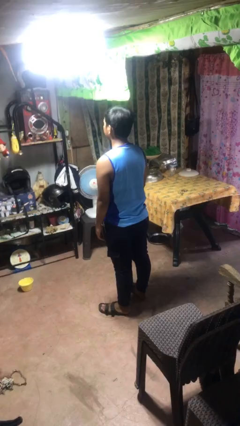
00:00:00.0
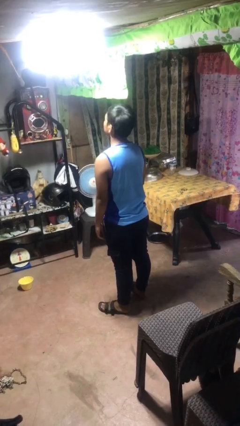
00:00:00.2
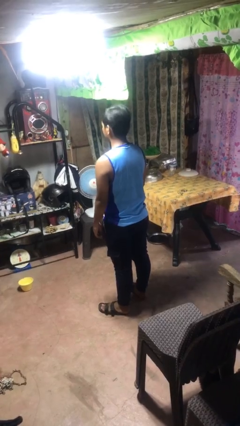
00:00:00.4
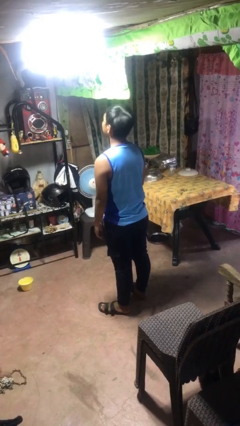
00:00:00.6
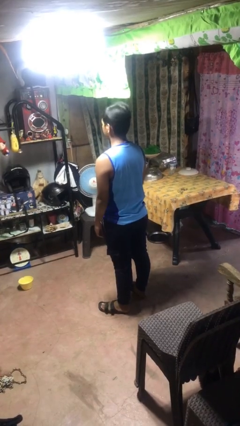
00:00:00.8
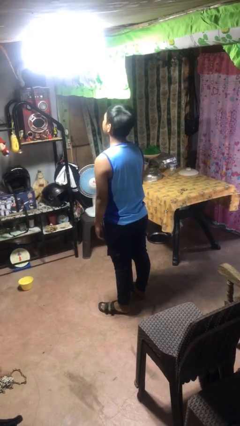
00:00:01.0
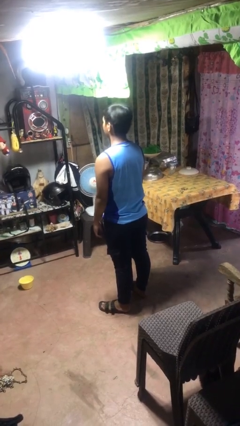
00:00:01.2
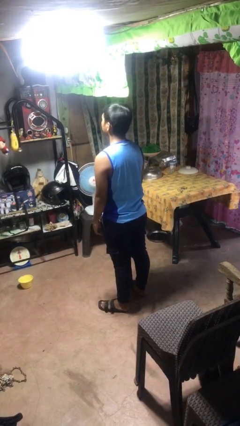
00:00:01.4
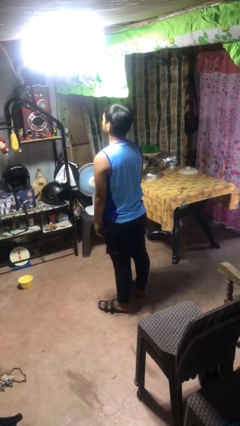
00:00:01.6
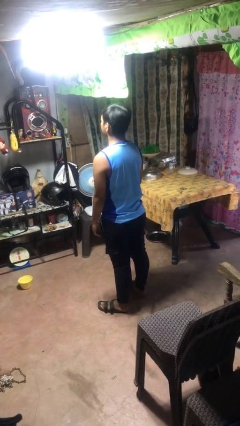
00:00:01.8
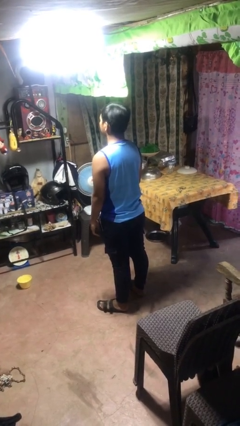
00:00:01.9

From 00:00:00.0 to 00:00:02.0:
person nods head

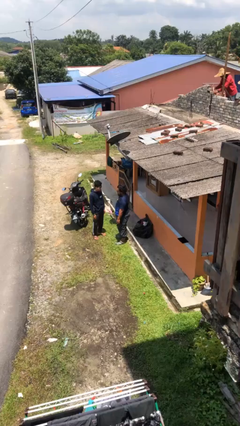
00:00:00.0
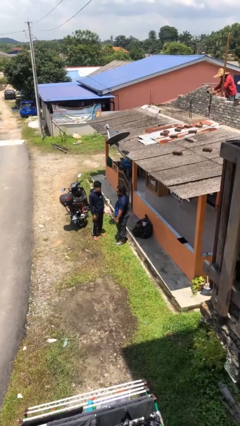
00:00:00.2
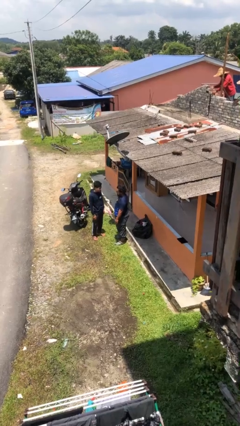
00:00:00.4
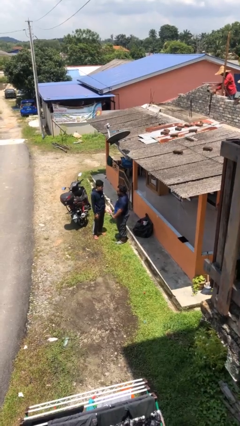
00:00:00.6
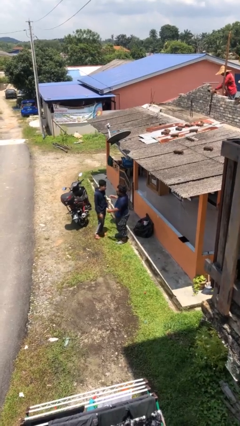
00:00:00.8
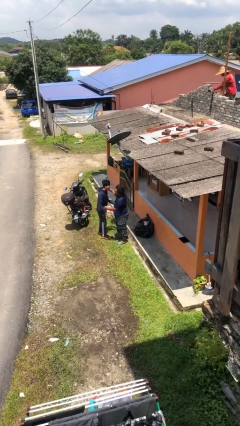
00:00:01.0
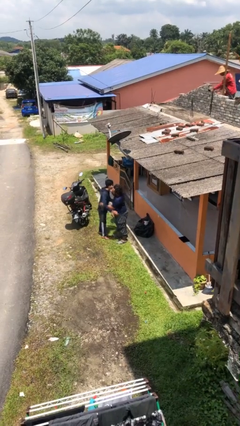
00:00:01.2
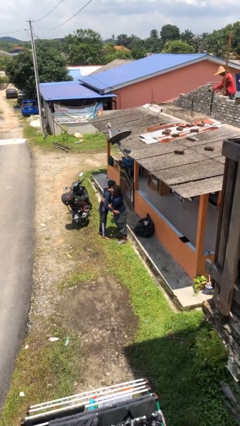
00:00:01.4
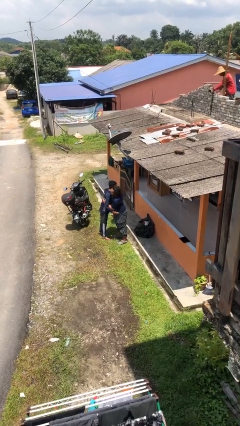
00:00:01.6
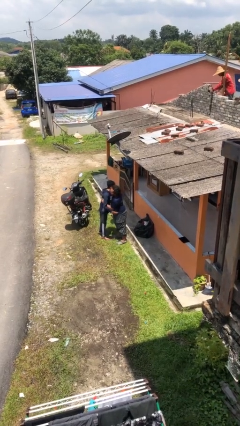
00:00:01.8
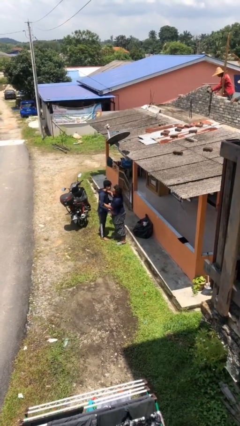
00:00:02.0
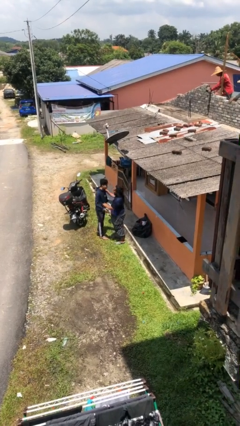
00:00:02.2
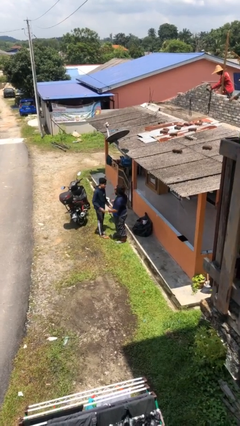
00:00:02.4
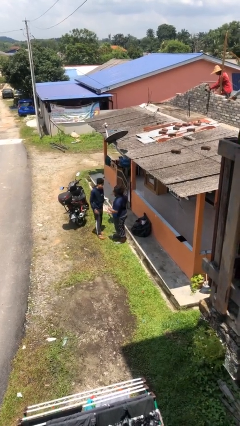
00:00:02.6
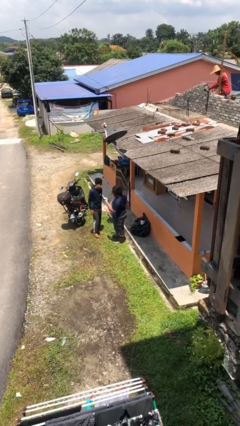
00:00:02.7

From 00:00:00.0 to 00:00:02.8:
person embraces person

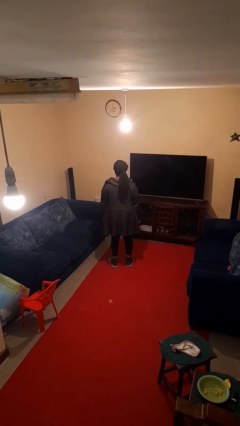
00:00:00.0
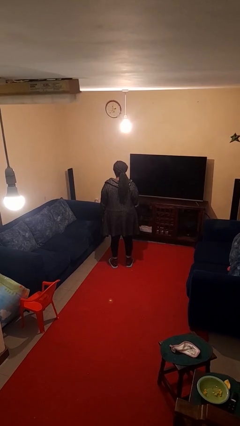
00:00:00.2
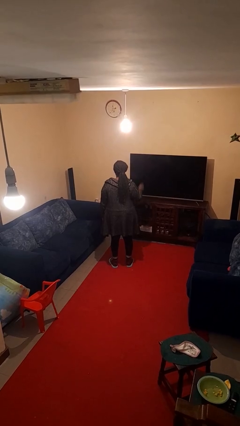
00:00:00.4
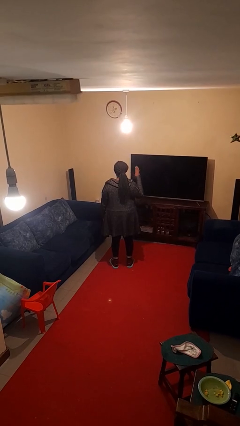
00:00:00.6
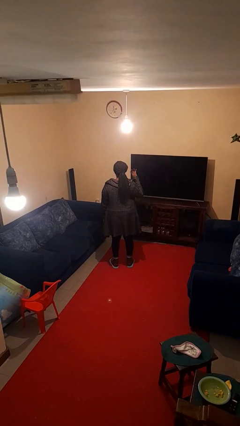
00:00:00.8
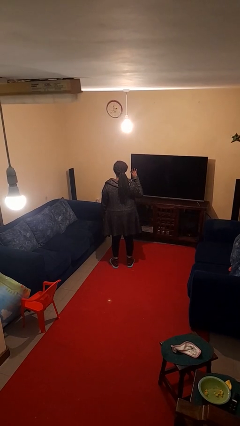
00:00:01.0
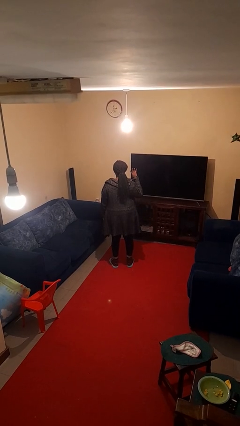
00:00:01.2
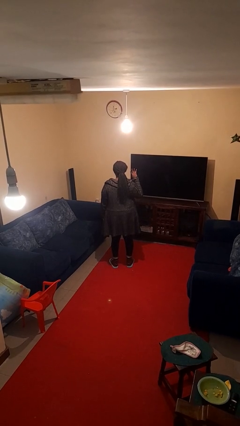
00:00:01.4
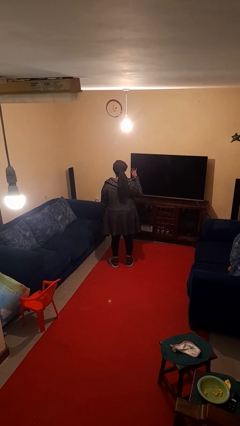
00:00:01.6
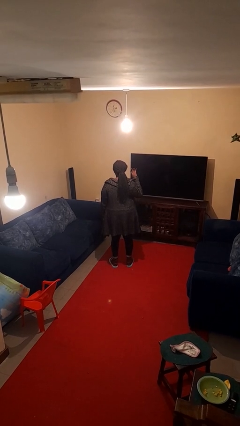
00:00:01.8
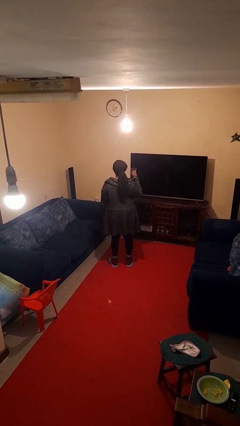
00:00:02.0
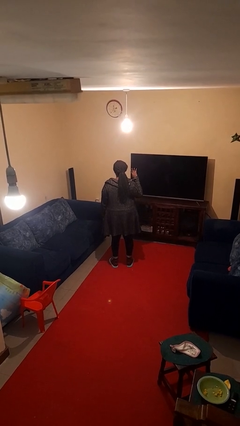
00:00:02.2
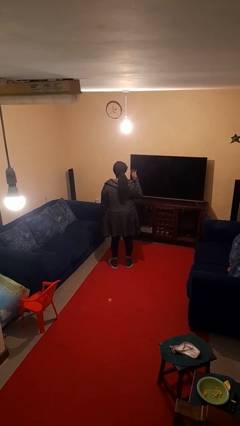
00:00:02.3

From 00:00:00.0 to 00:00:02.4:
person gestures number four

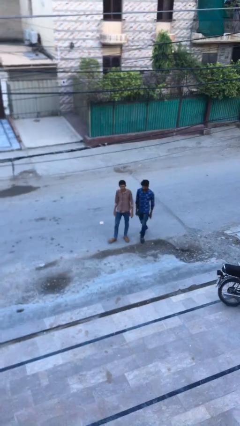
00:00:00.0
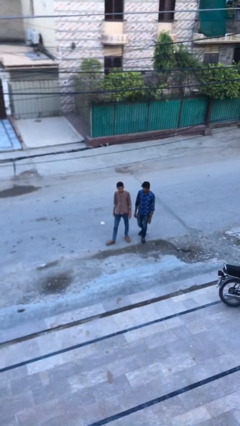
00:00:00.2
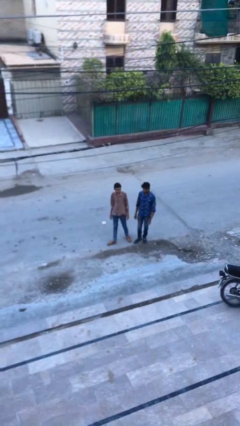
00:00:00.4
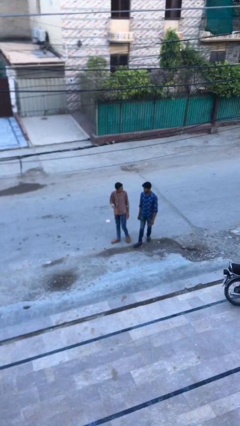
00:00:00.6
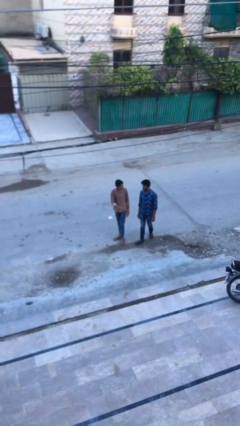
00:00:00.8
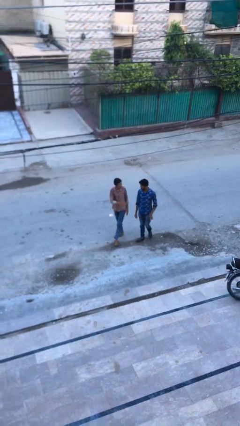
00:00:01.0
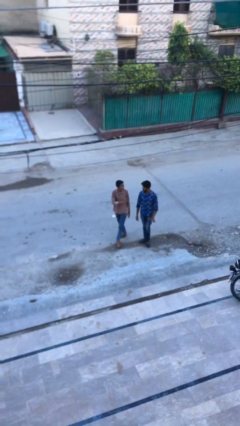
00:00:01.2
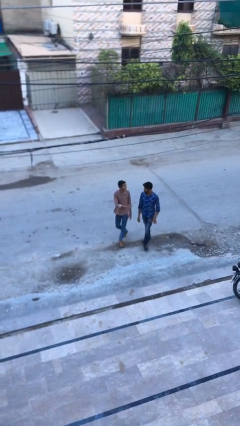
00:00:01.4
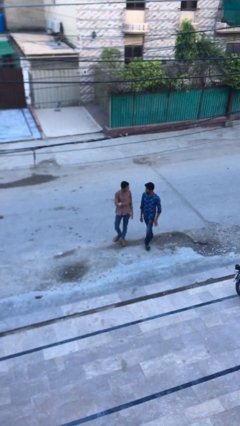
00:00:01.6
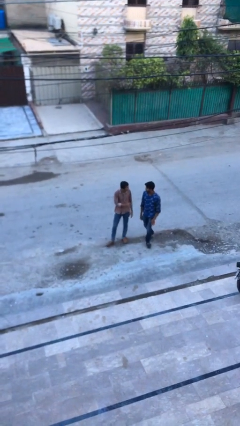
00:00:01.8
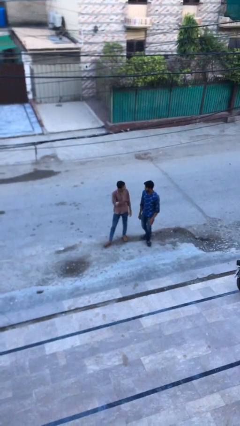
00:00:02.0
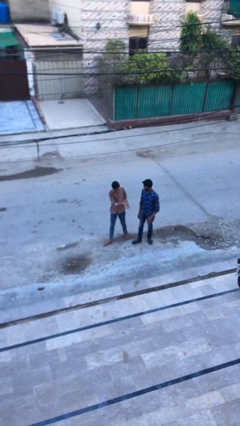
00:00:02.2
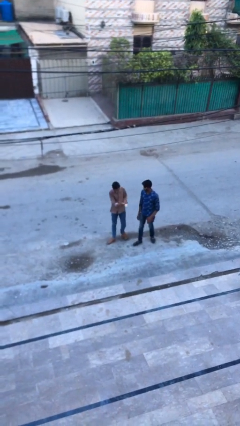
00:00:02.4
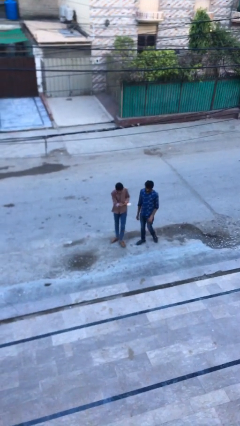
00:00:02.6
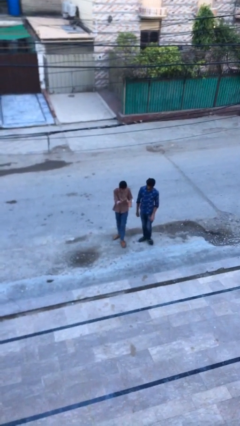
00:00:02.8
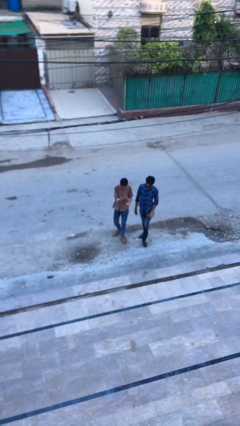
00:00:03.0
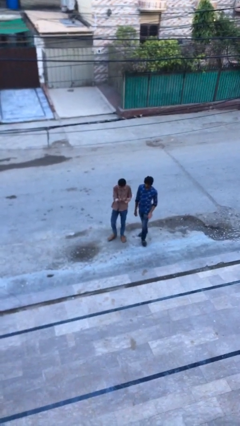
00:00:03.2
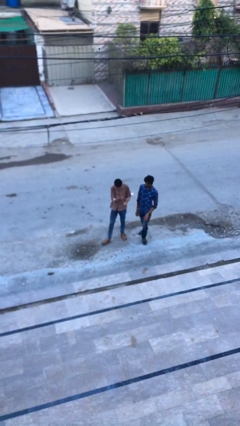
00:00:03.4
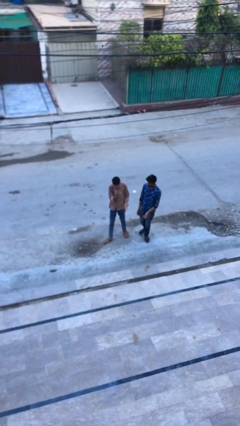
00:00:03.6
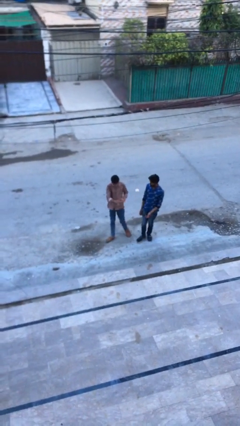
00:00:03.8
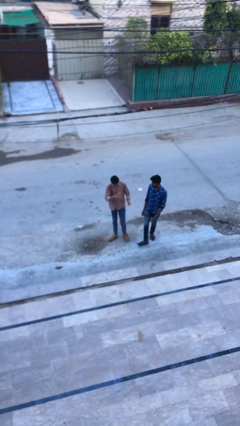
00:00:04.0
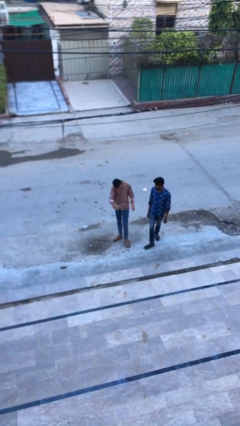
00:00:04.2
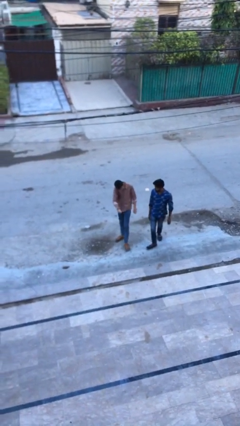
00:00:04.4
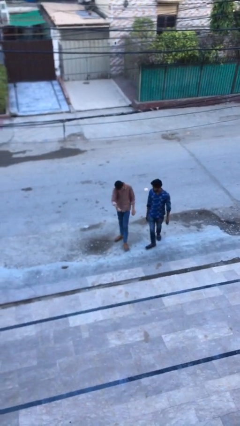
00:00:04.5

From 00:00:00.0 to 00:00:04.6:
person talks to person

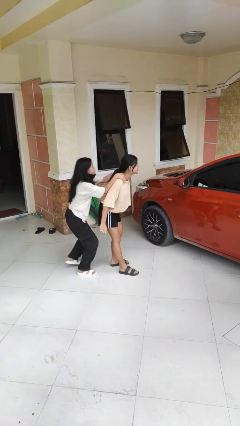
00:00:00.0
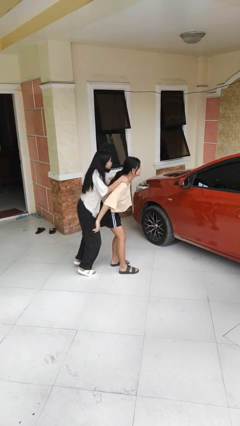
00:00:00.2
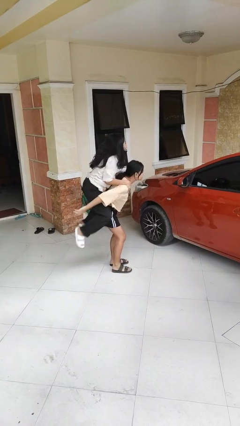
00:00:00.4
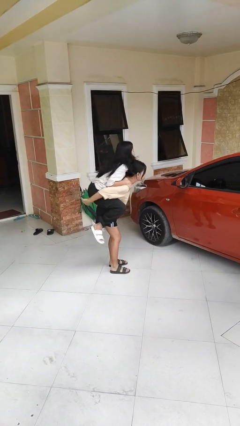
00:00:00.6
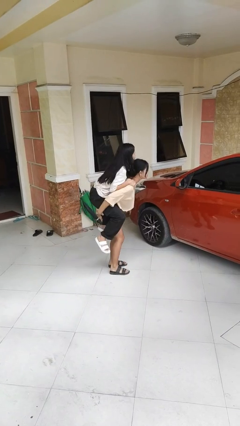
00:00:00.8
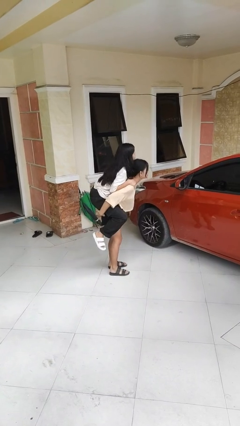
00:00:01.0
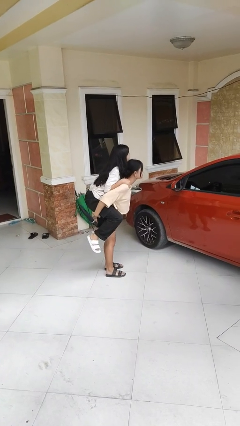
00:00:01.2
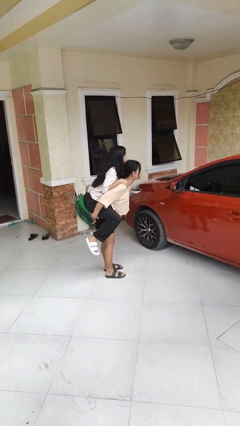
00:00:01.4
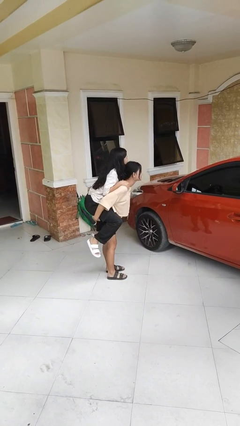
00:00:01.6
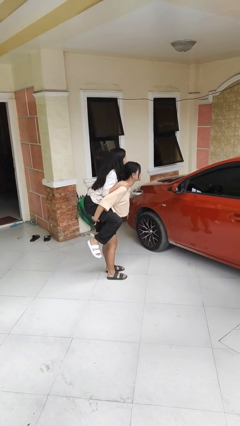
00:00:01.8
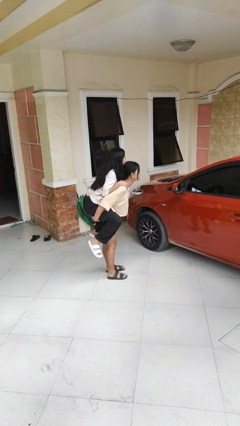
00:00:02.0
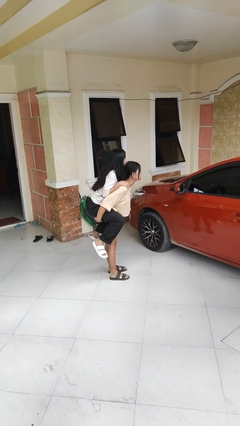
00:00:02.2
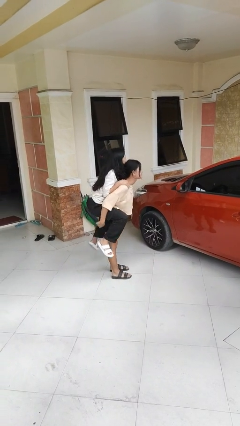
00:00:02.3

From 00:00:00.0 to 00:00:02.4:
person carries person over shoulder

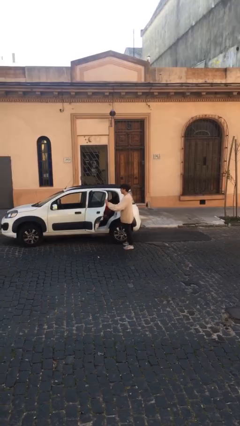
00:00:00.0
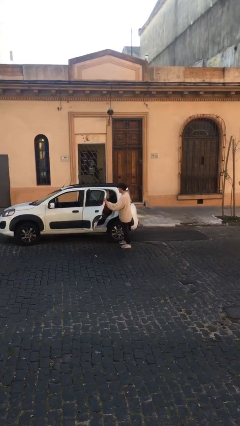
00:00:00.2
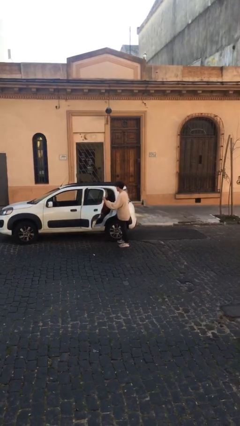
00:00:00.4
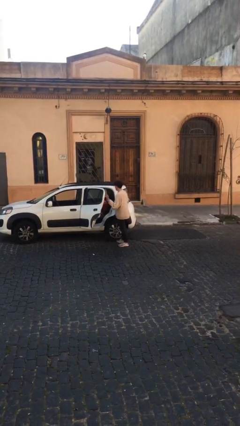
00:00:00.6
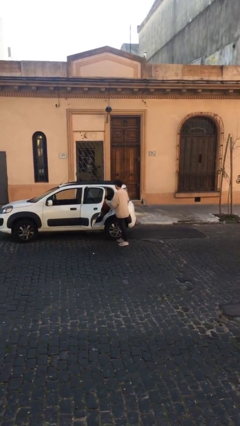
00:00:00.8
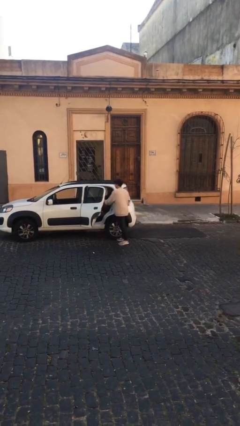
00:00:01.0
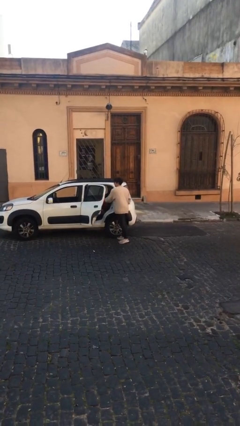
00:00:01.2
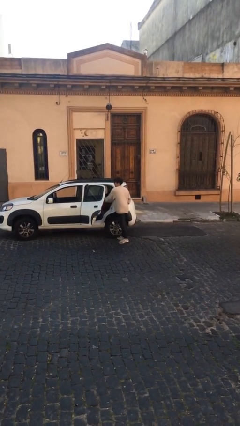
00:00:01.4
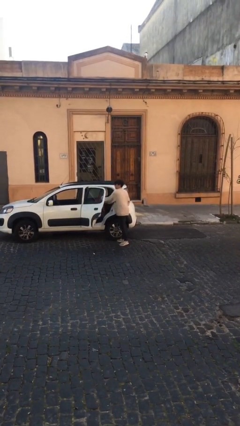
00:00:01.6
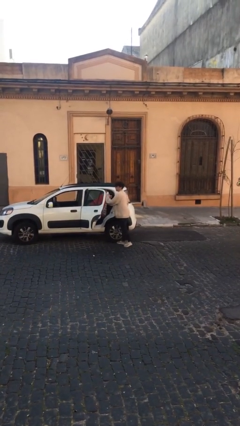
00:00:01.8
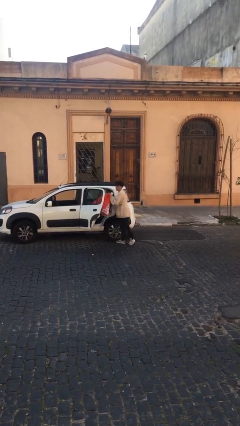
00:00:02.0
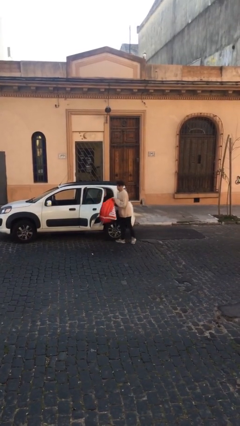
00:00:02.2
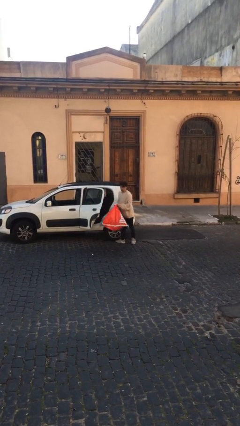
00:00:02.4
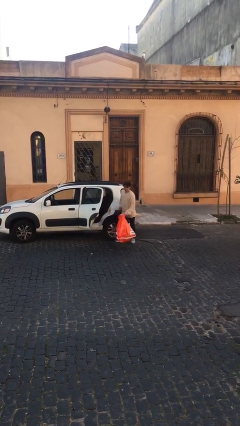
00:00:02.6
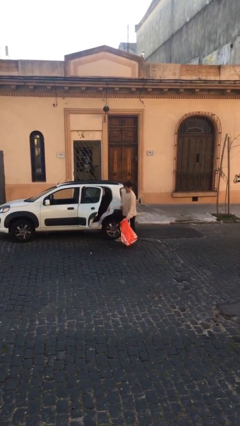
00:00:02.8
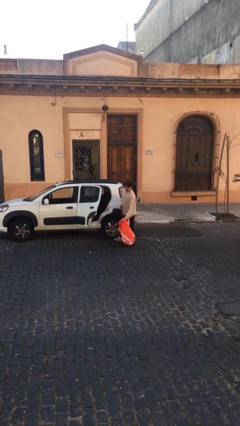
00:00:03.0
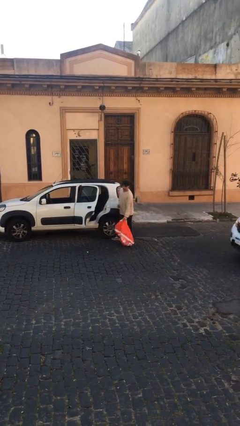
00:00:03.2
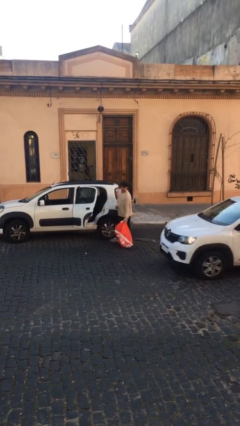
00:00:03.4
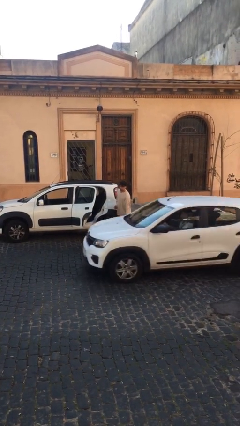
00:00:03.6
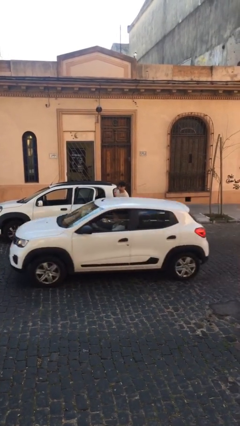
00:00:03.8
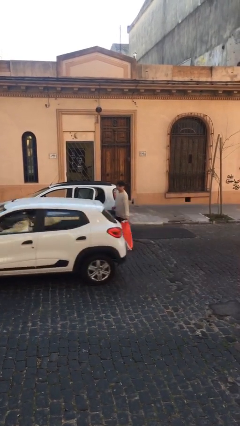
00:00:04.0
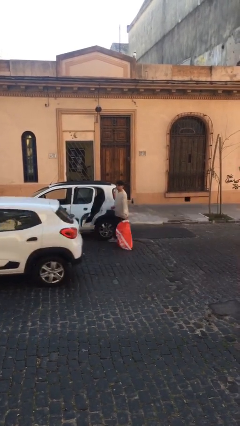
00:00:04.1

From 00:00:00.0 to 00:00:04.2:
person unloads car
